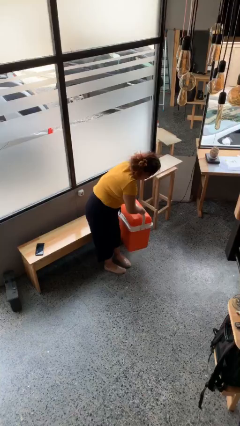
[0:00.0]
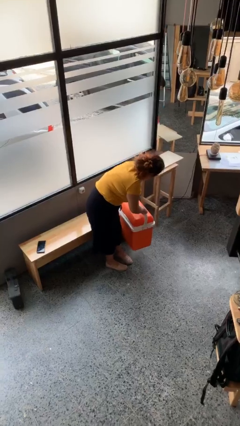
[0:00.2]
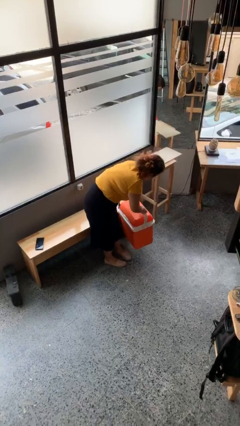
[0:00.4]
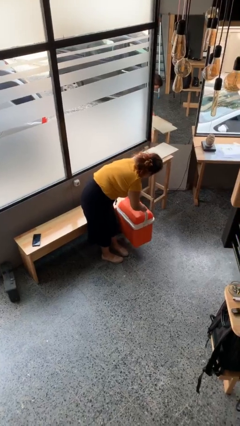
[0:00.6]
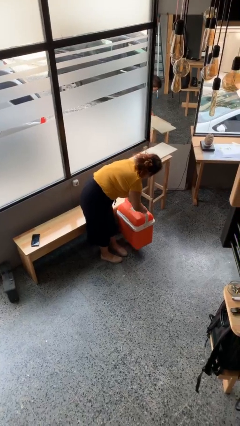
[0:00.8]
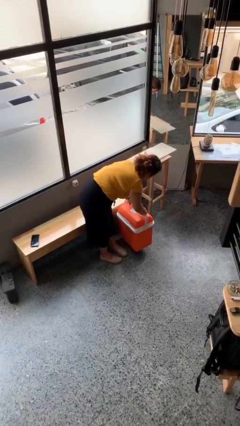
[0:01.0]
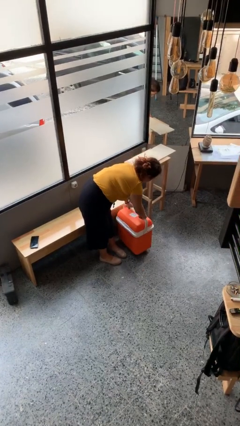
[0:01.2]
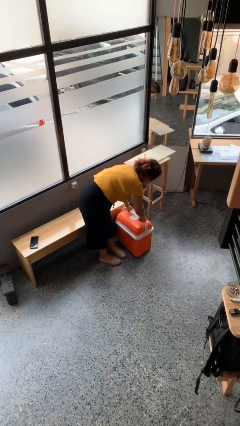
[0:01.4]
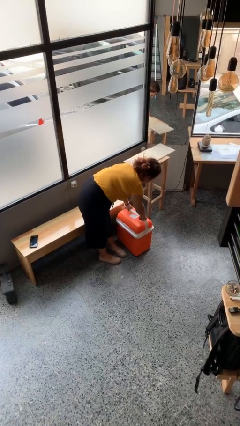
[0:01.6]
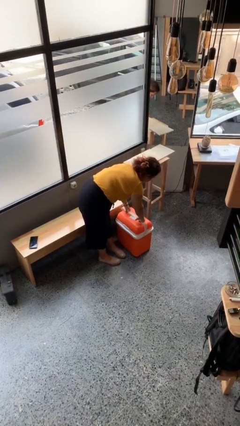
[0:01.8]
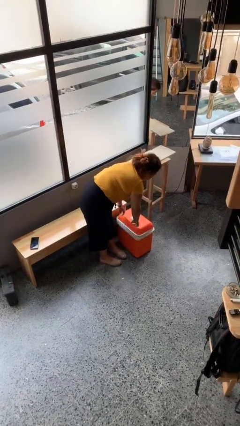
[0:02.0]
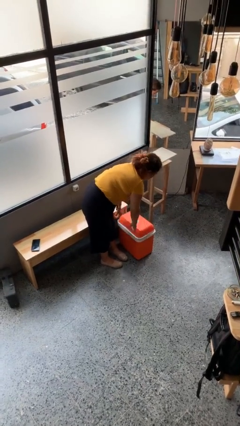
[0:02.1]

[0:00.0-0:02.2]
person puts down object on floor

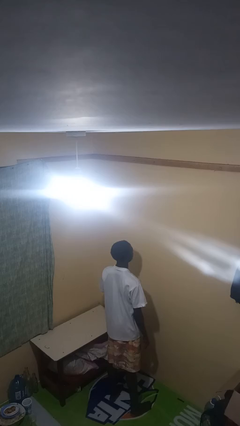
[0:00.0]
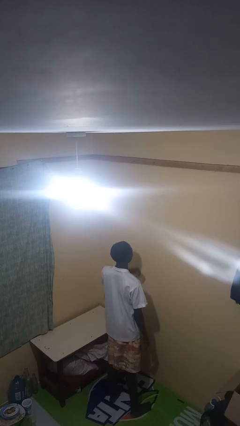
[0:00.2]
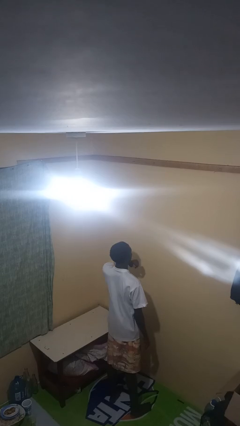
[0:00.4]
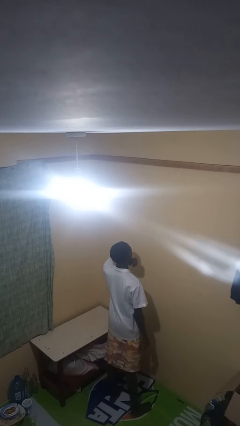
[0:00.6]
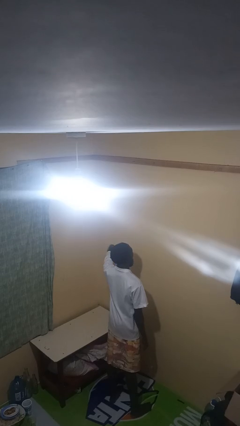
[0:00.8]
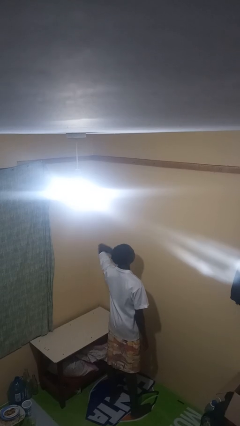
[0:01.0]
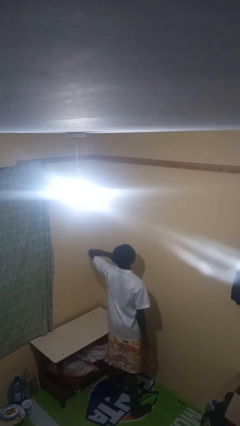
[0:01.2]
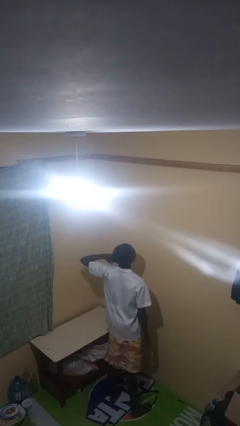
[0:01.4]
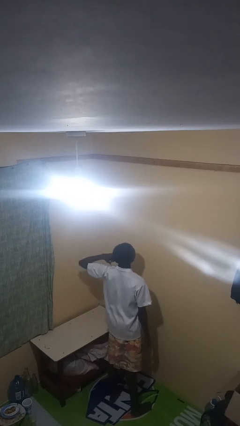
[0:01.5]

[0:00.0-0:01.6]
person gestures cut

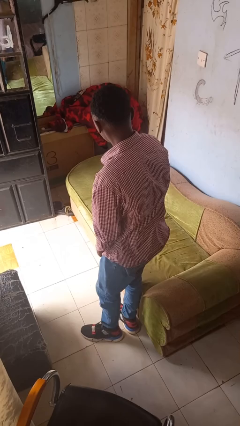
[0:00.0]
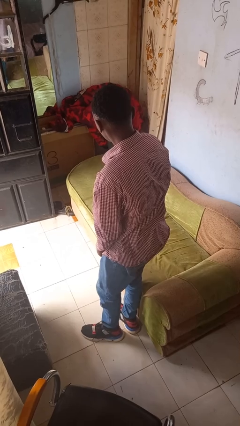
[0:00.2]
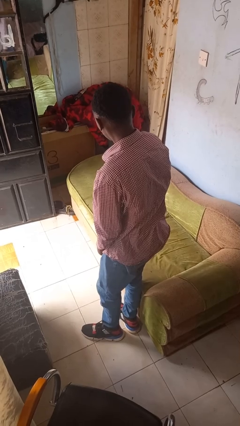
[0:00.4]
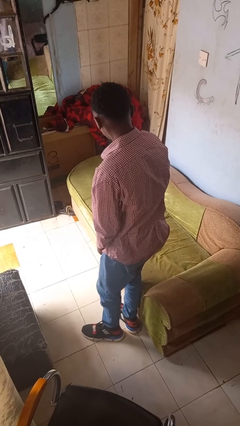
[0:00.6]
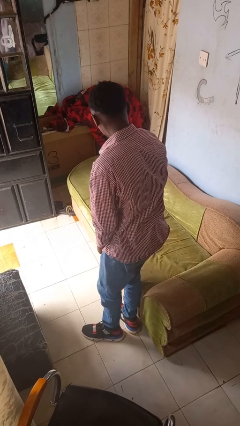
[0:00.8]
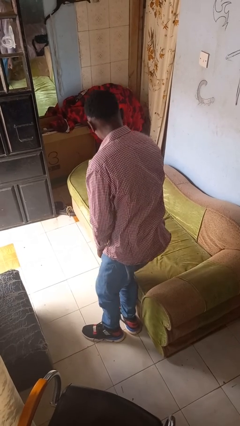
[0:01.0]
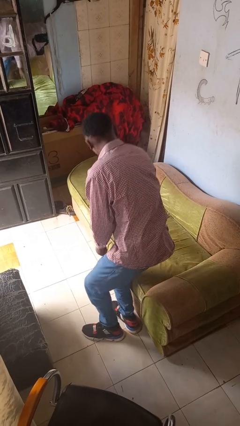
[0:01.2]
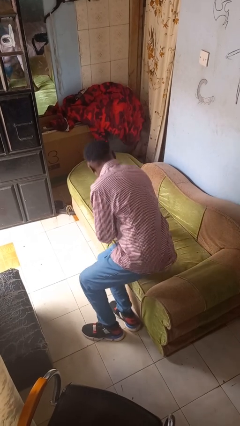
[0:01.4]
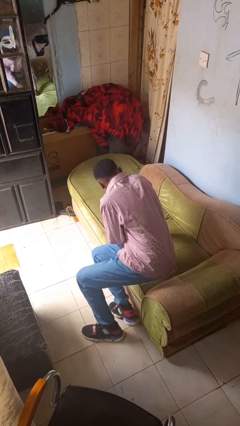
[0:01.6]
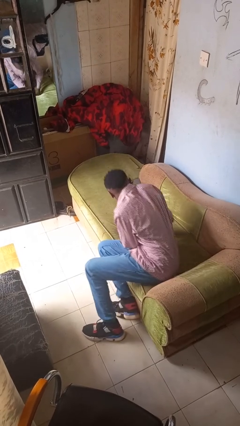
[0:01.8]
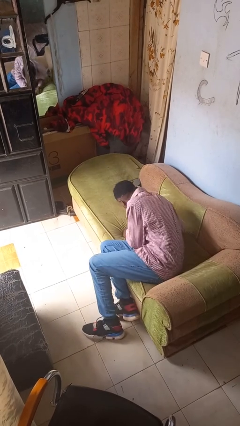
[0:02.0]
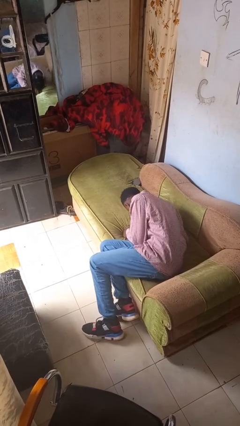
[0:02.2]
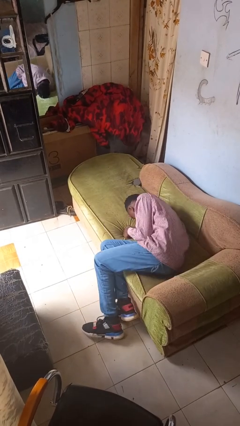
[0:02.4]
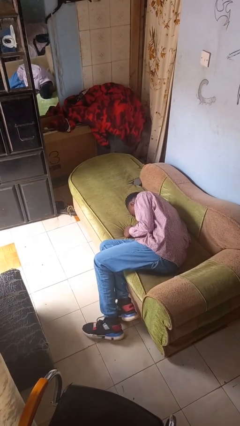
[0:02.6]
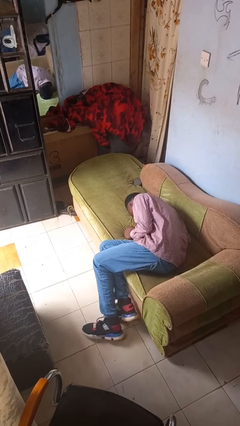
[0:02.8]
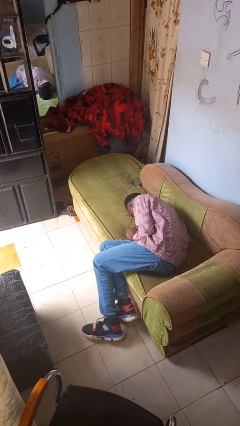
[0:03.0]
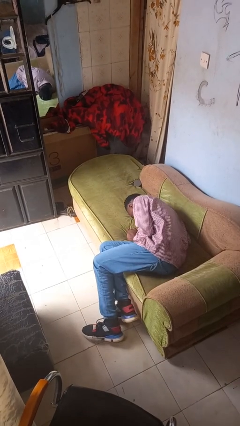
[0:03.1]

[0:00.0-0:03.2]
person lies down on couch

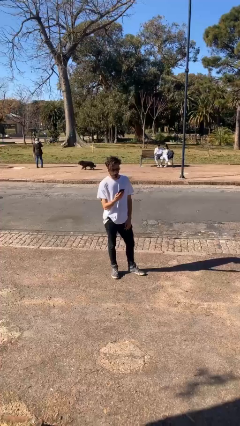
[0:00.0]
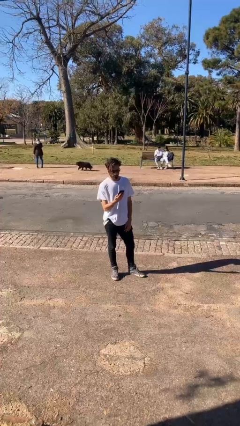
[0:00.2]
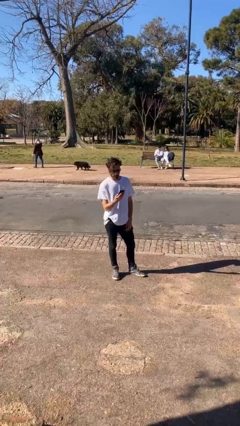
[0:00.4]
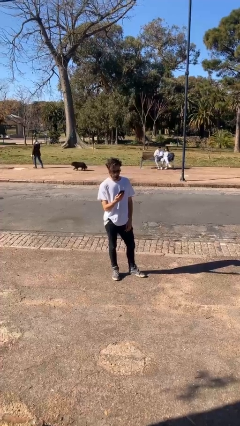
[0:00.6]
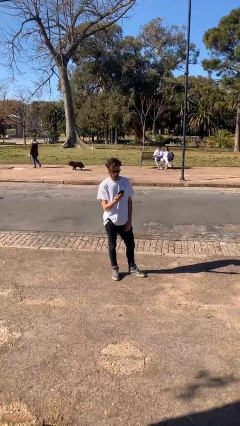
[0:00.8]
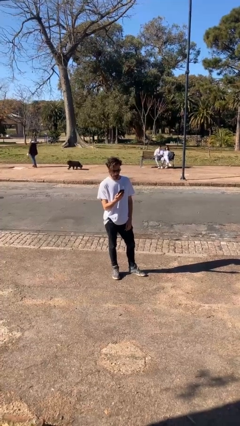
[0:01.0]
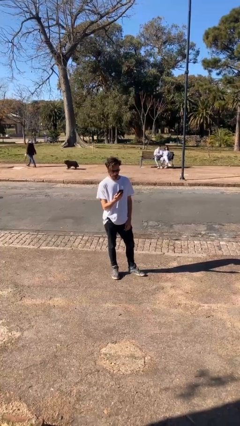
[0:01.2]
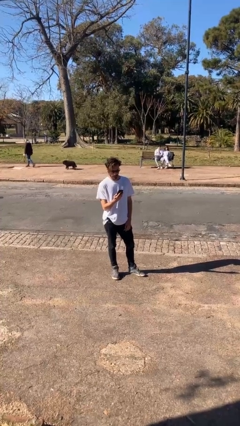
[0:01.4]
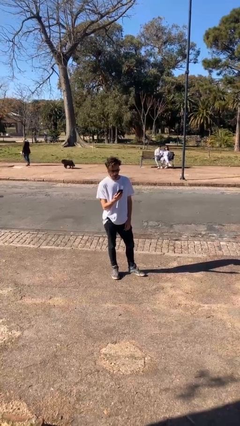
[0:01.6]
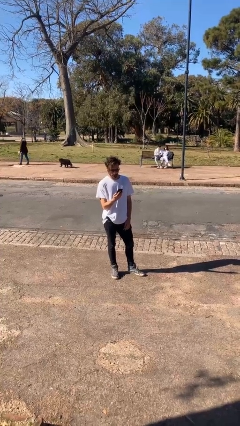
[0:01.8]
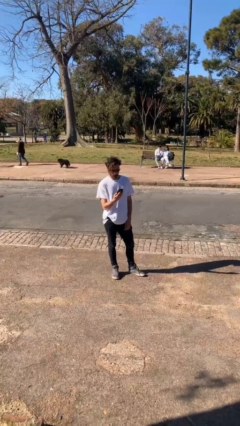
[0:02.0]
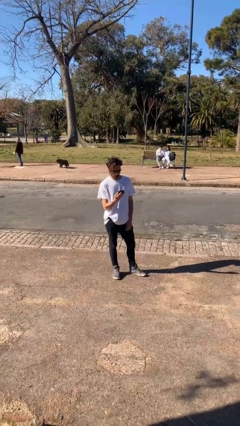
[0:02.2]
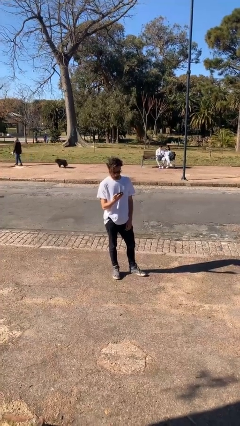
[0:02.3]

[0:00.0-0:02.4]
person puts phone into pocket

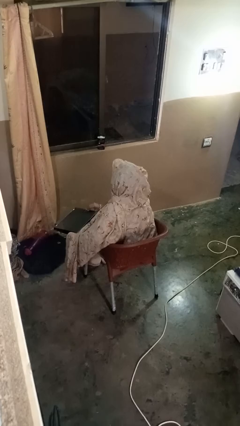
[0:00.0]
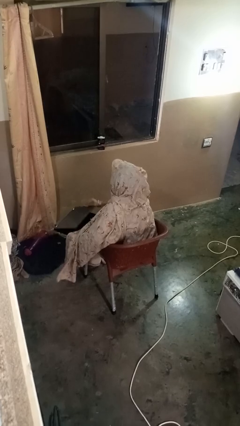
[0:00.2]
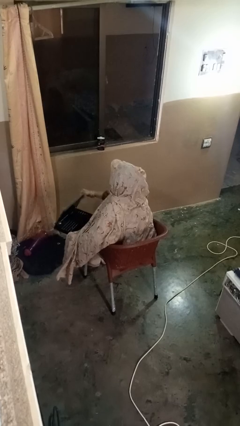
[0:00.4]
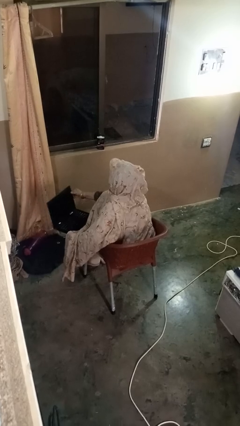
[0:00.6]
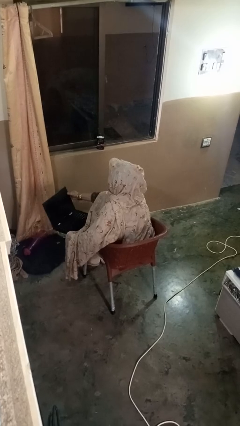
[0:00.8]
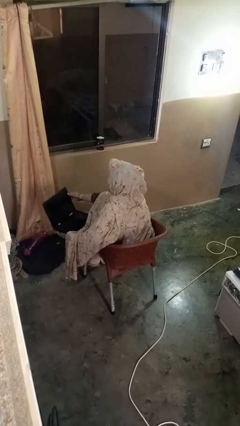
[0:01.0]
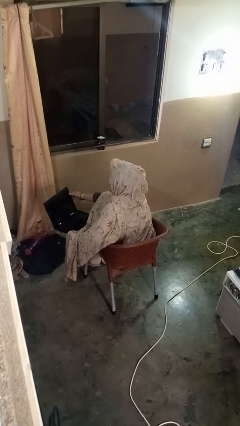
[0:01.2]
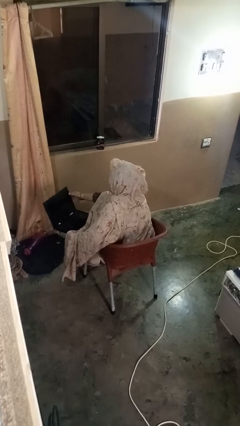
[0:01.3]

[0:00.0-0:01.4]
person opens laptop

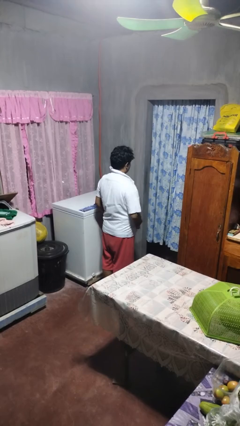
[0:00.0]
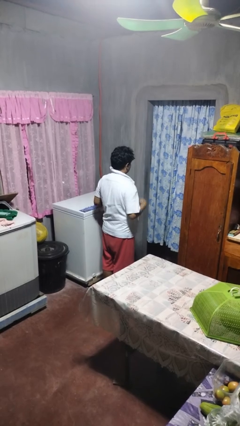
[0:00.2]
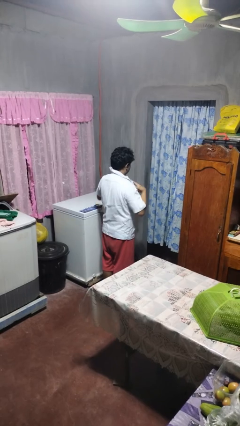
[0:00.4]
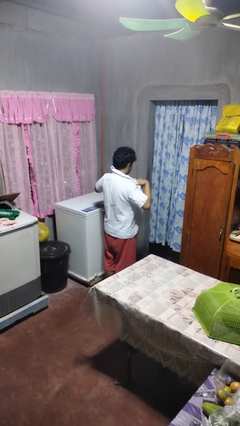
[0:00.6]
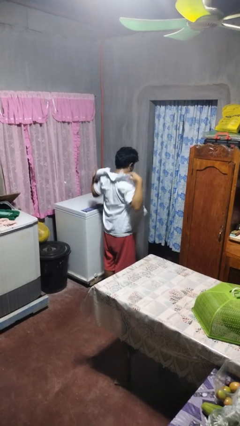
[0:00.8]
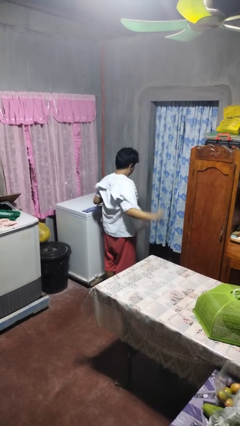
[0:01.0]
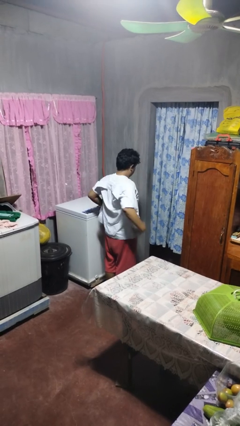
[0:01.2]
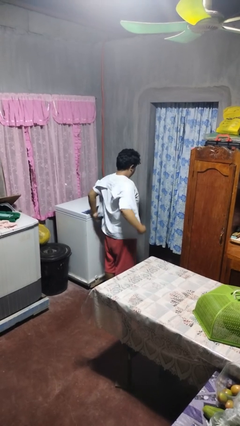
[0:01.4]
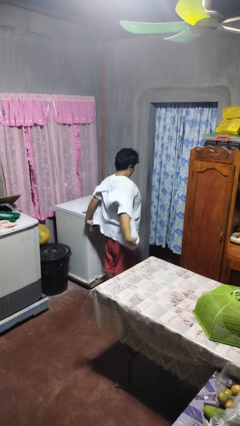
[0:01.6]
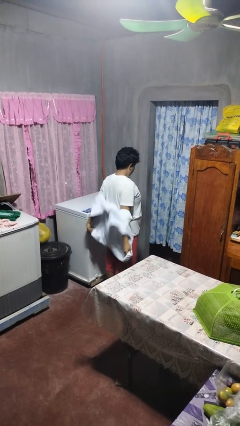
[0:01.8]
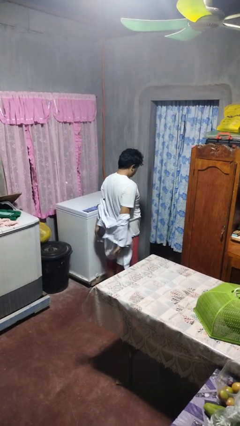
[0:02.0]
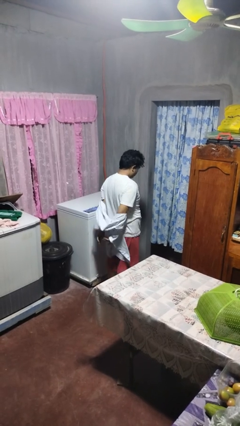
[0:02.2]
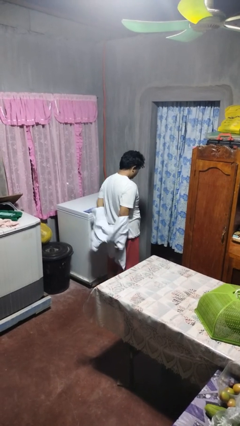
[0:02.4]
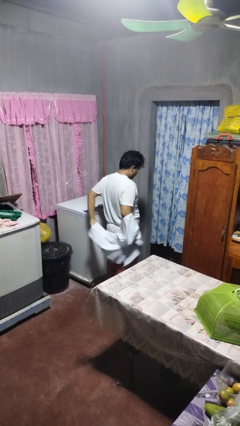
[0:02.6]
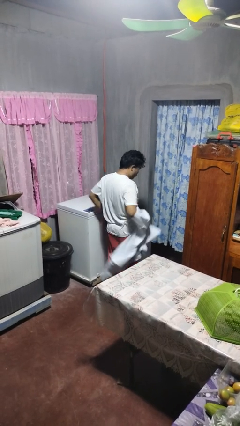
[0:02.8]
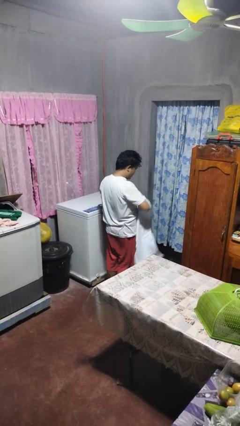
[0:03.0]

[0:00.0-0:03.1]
person takes off shirt

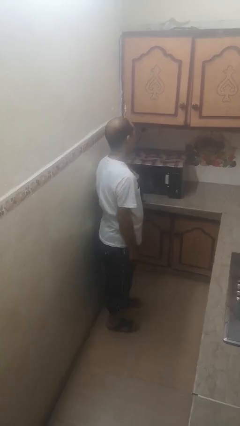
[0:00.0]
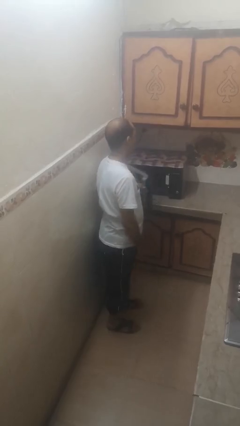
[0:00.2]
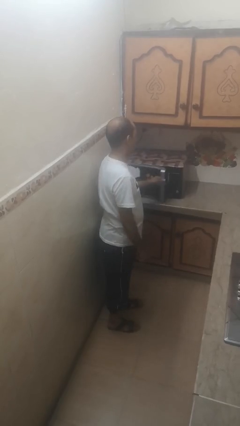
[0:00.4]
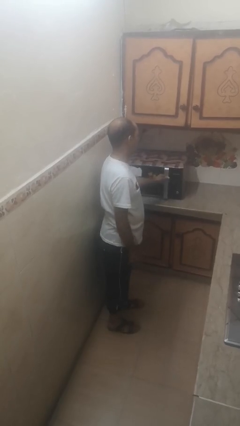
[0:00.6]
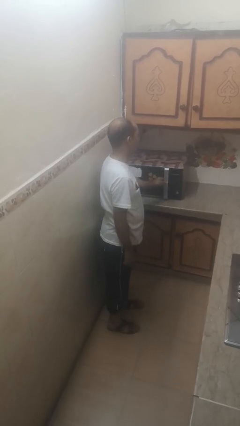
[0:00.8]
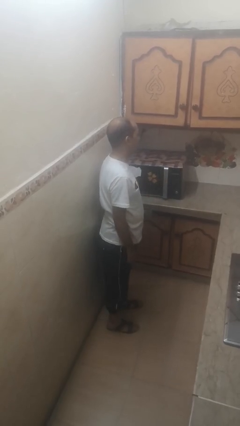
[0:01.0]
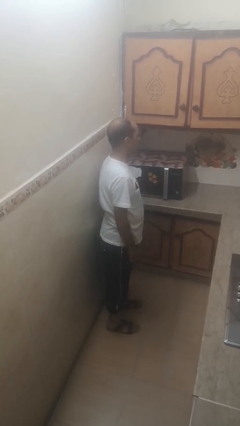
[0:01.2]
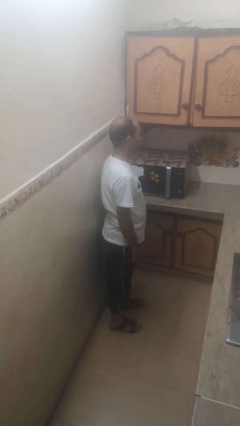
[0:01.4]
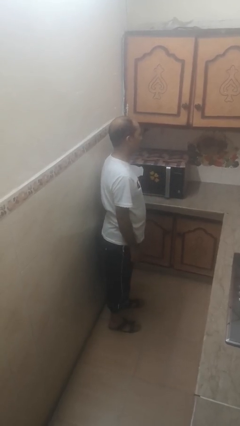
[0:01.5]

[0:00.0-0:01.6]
person closes microwave

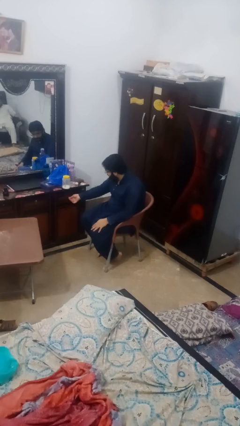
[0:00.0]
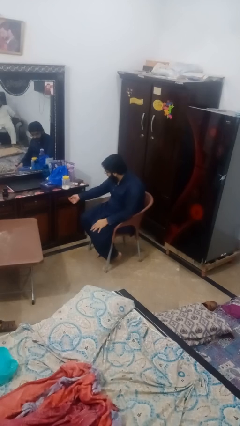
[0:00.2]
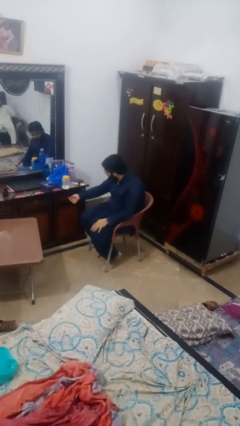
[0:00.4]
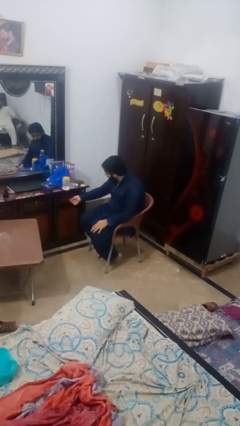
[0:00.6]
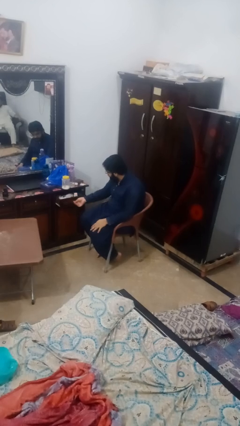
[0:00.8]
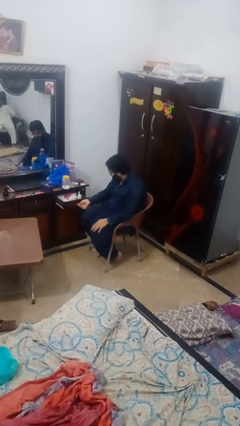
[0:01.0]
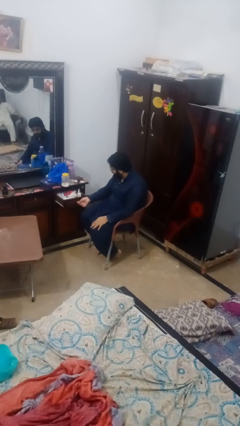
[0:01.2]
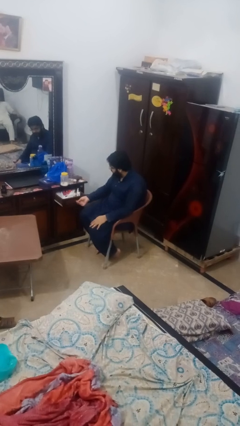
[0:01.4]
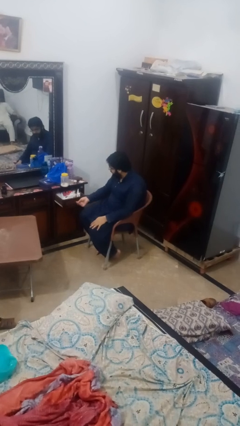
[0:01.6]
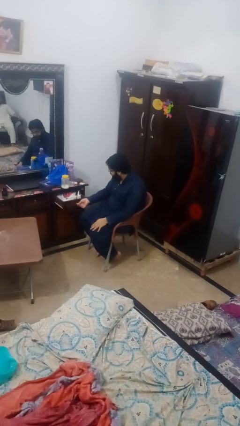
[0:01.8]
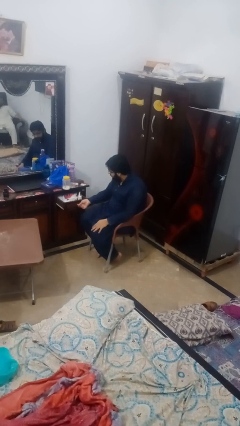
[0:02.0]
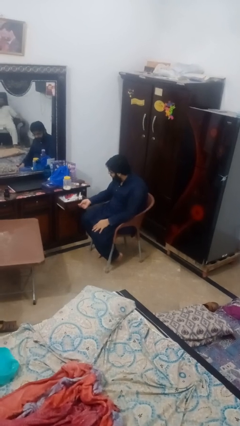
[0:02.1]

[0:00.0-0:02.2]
person opens dresser drawer
